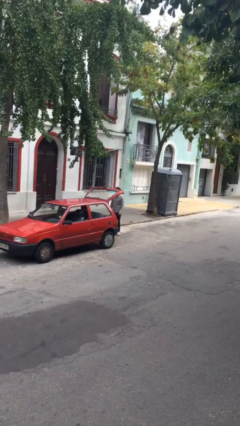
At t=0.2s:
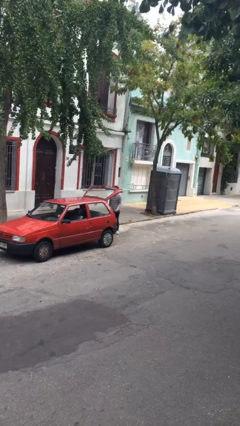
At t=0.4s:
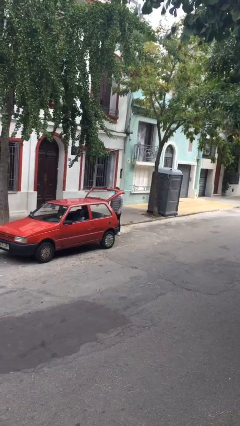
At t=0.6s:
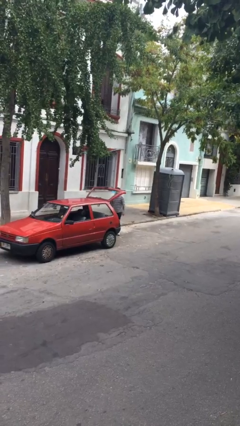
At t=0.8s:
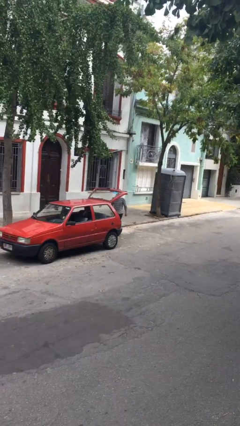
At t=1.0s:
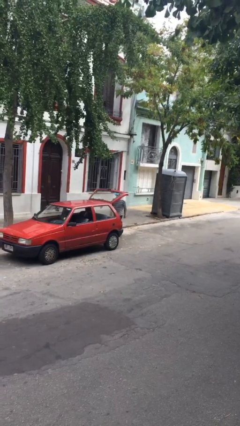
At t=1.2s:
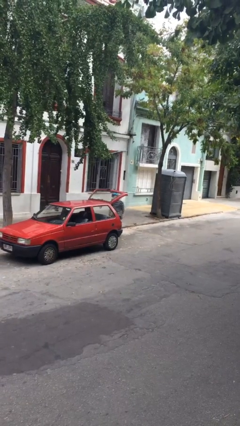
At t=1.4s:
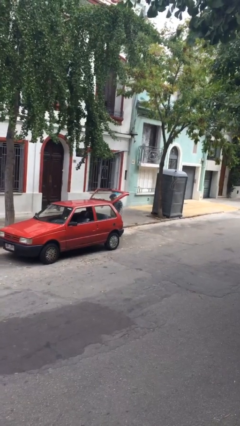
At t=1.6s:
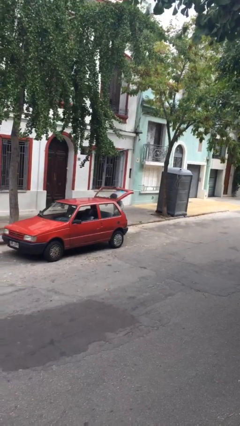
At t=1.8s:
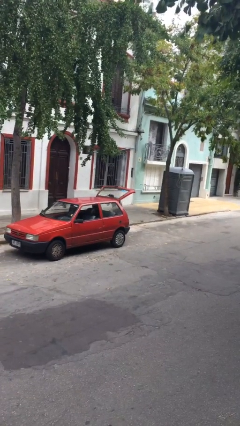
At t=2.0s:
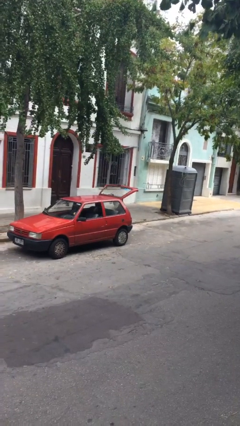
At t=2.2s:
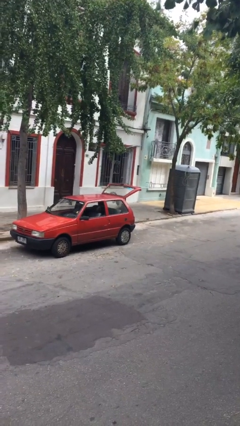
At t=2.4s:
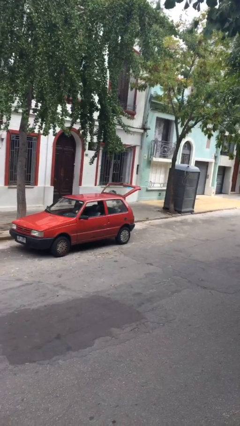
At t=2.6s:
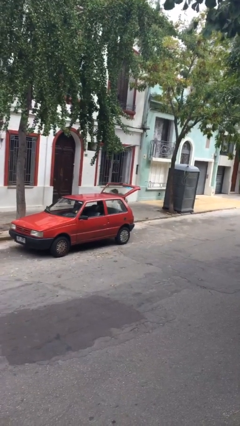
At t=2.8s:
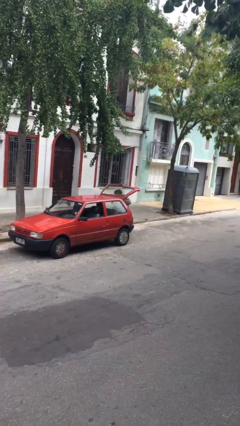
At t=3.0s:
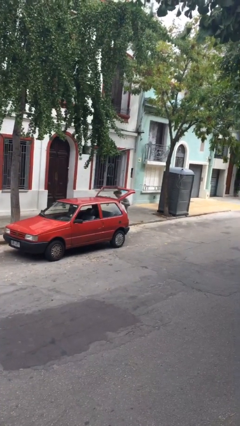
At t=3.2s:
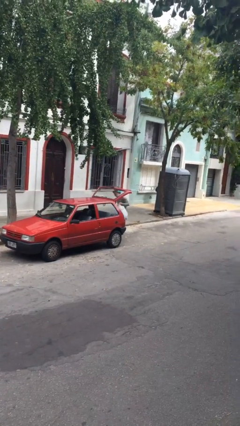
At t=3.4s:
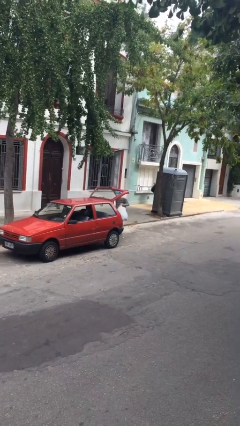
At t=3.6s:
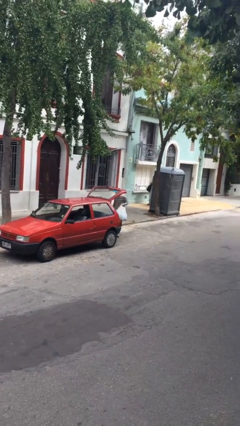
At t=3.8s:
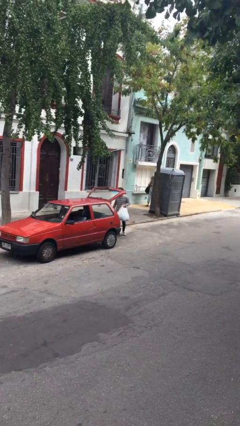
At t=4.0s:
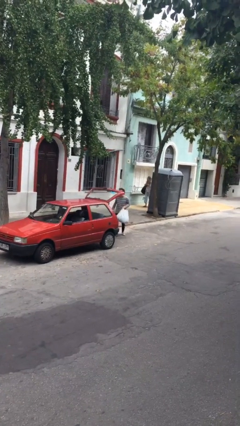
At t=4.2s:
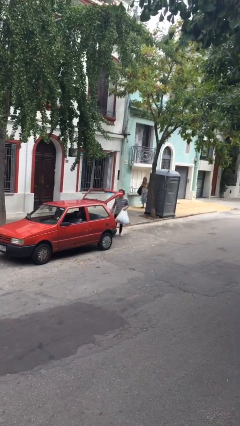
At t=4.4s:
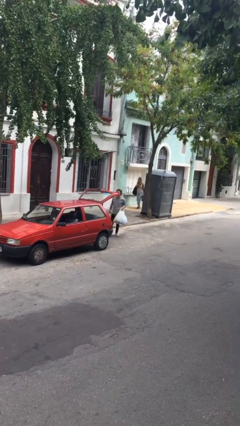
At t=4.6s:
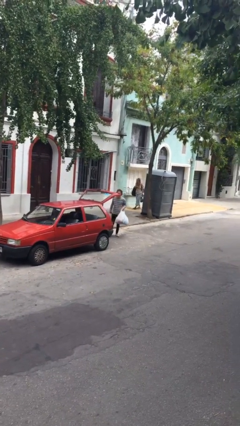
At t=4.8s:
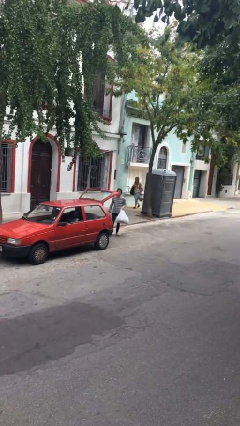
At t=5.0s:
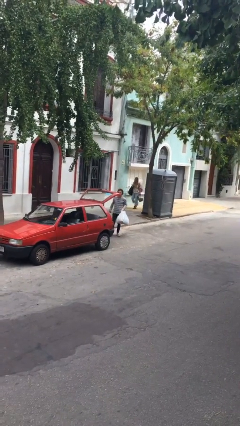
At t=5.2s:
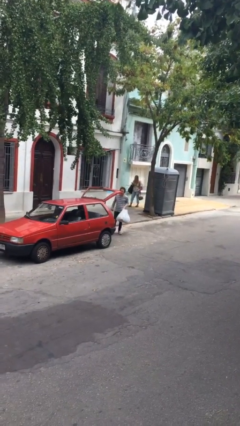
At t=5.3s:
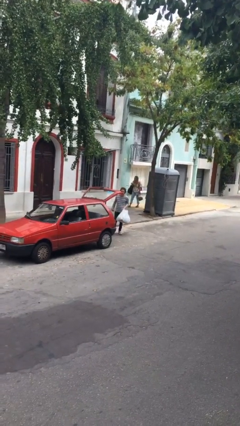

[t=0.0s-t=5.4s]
person unloads car

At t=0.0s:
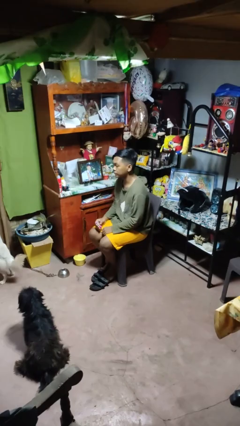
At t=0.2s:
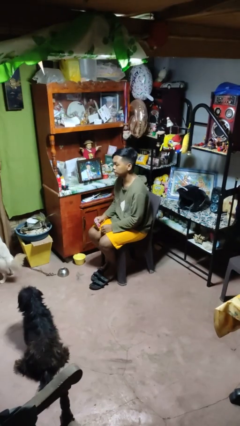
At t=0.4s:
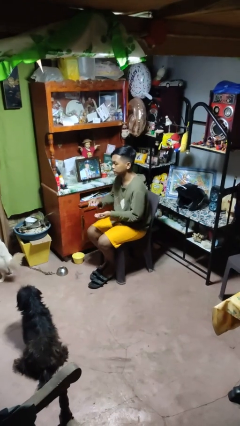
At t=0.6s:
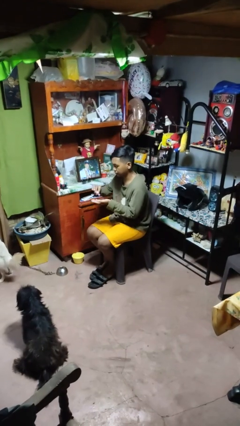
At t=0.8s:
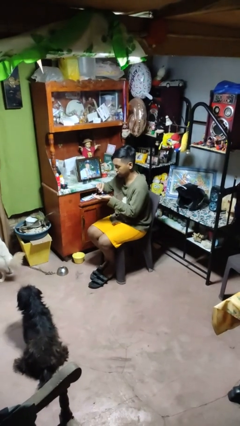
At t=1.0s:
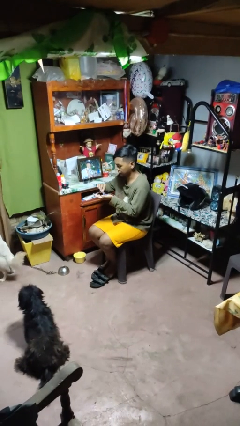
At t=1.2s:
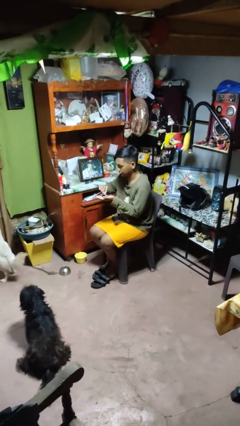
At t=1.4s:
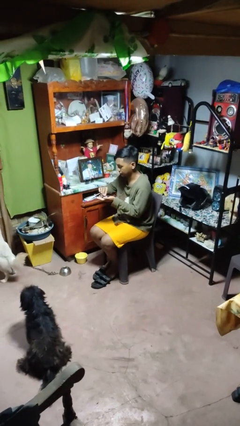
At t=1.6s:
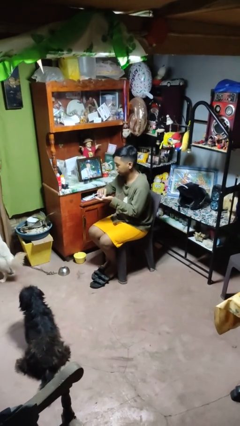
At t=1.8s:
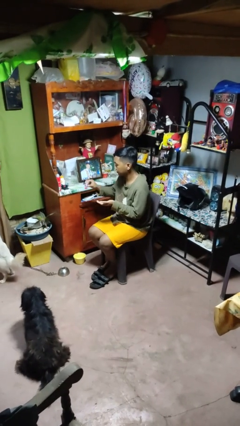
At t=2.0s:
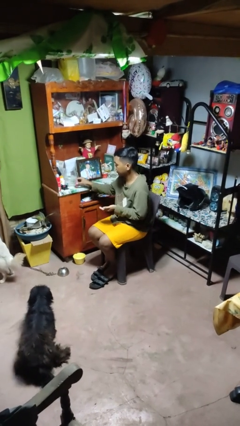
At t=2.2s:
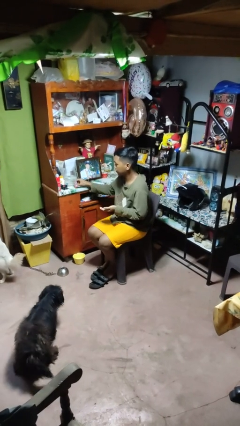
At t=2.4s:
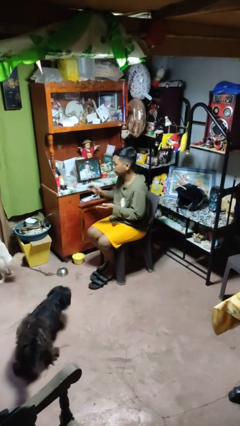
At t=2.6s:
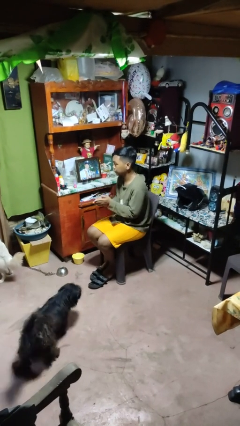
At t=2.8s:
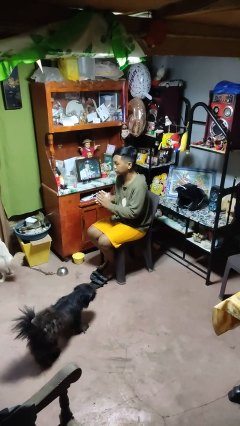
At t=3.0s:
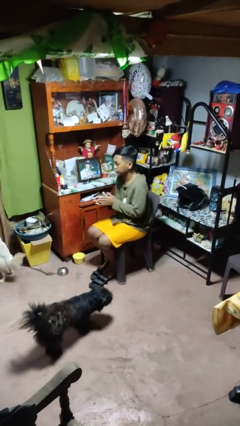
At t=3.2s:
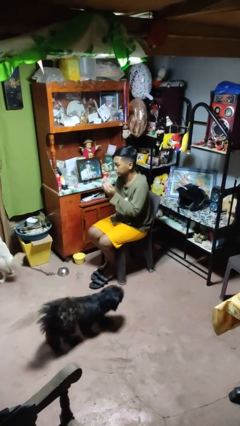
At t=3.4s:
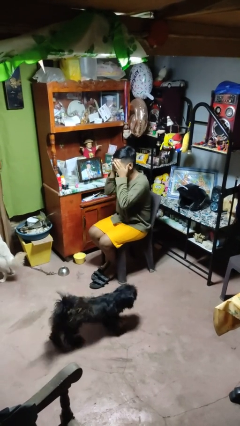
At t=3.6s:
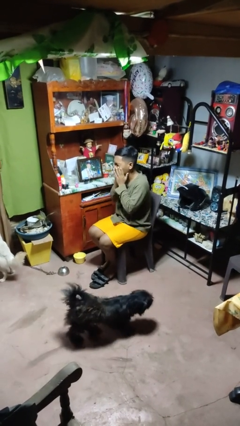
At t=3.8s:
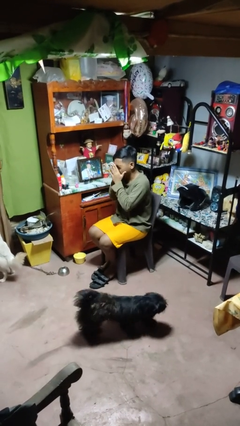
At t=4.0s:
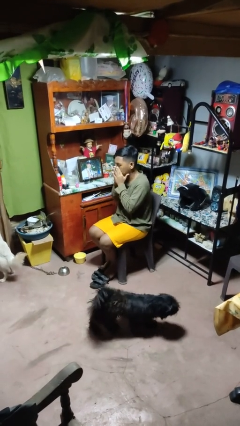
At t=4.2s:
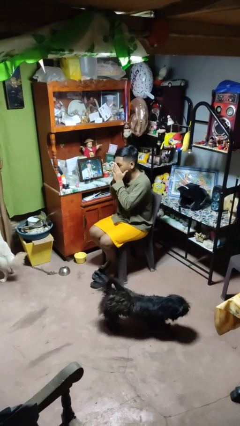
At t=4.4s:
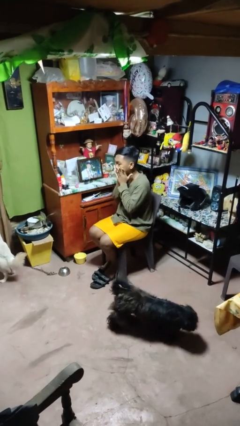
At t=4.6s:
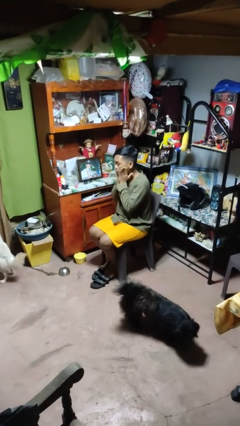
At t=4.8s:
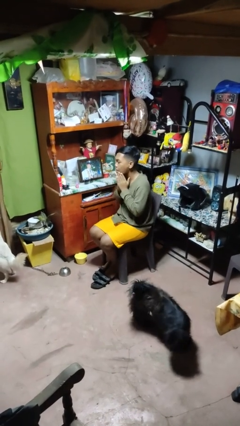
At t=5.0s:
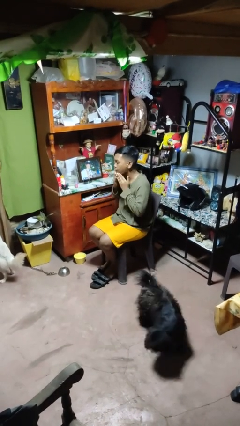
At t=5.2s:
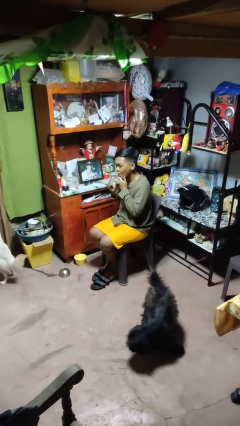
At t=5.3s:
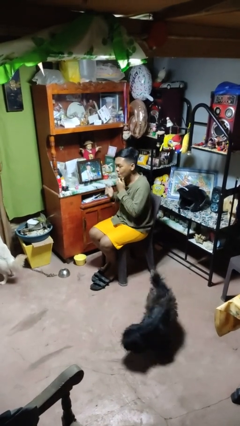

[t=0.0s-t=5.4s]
person applies facial moisturizer

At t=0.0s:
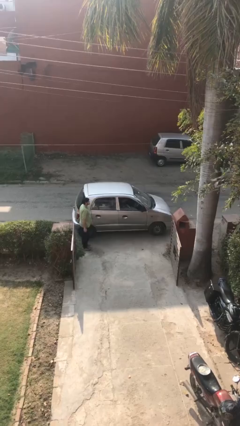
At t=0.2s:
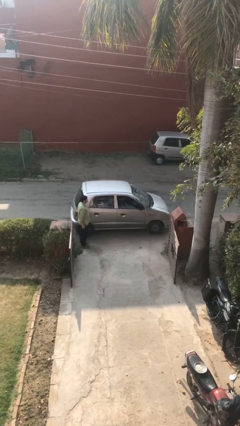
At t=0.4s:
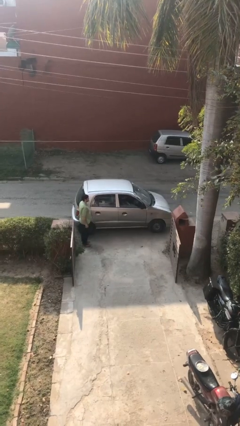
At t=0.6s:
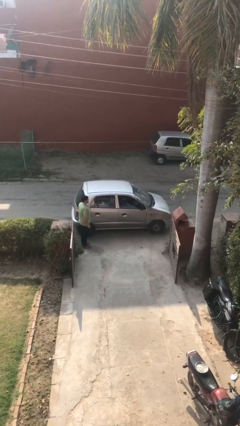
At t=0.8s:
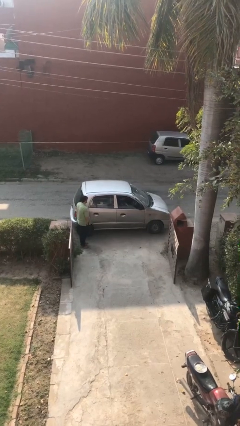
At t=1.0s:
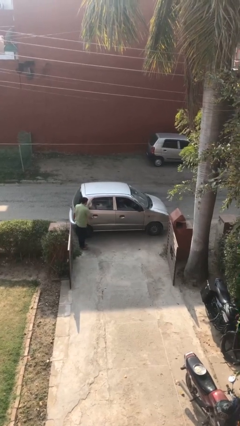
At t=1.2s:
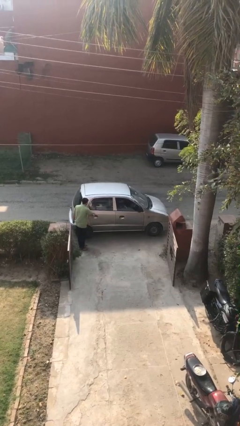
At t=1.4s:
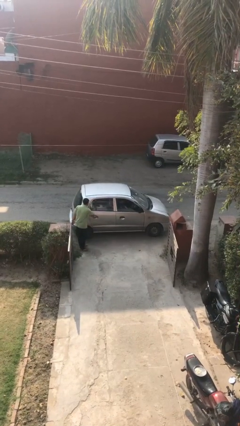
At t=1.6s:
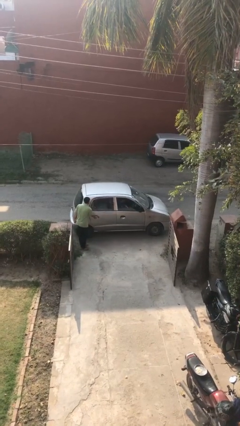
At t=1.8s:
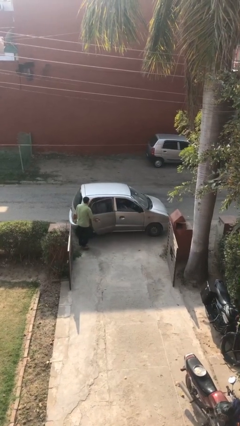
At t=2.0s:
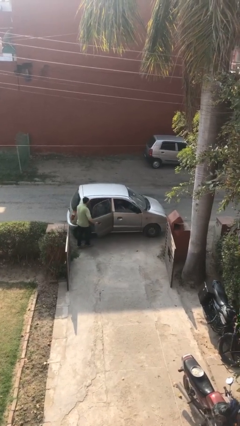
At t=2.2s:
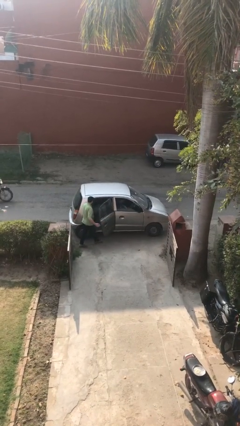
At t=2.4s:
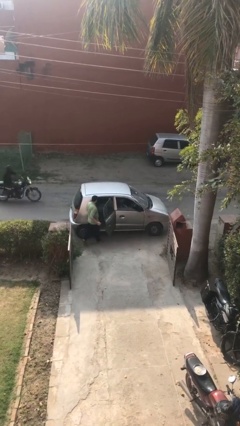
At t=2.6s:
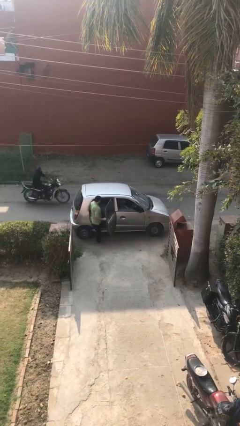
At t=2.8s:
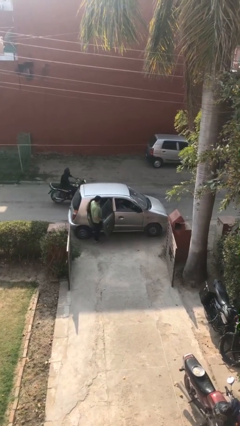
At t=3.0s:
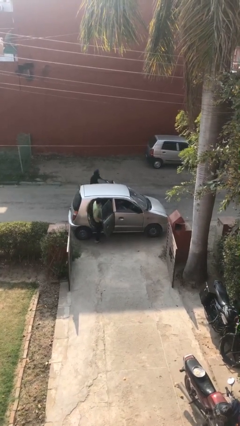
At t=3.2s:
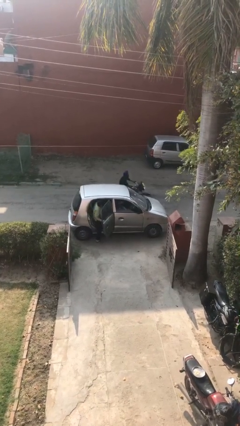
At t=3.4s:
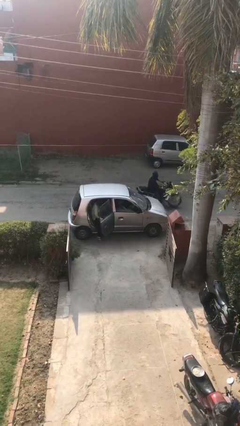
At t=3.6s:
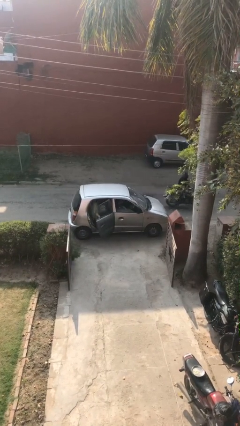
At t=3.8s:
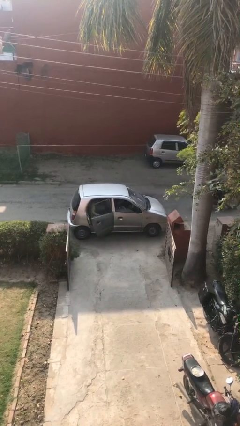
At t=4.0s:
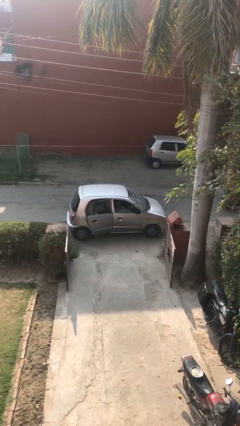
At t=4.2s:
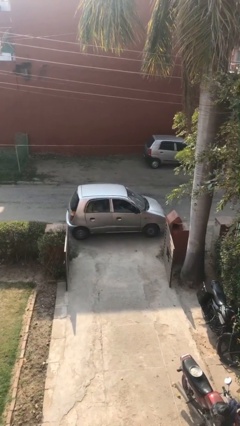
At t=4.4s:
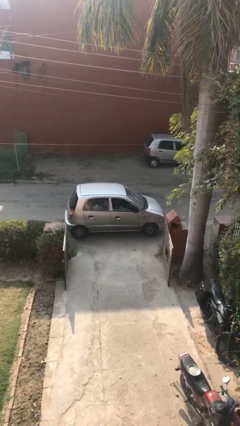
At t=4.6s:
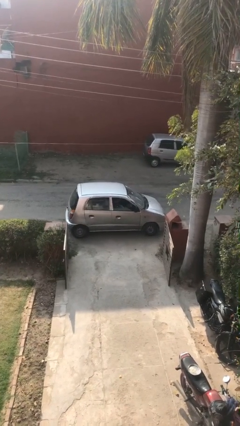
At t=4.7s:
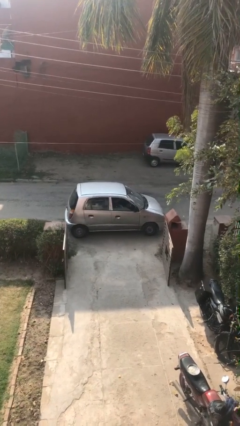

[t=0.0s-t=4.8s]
car picks up person

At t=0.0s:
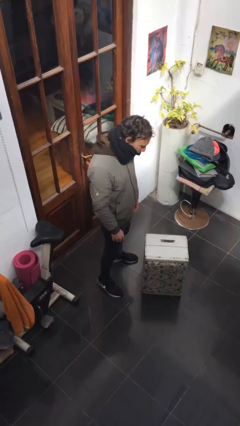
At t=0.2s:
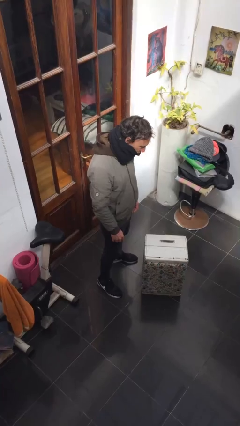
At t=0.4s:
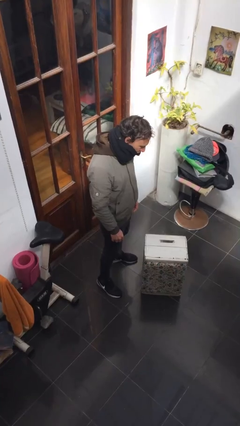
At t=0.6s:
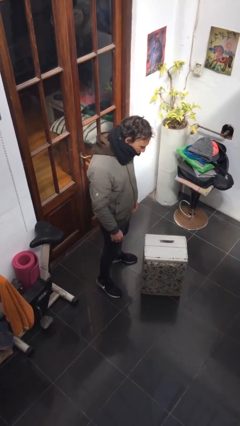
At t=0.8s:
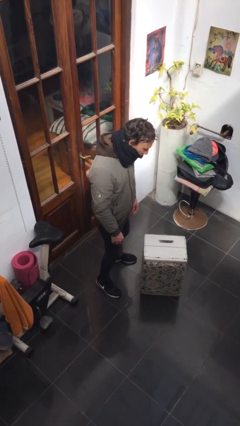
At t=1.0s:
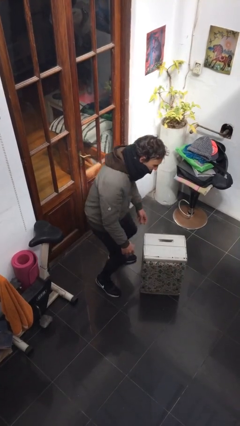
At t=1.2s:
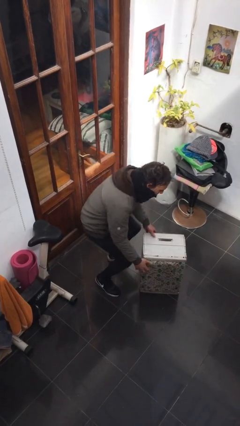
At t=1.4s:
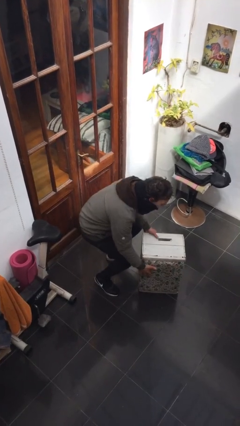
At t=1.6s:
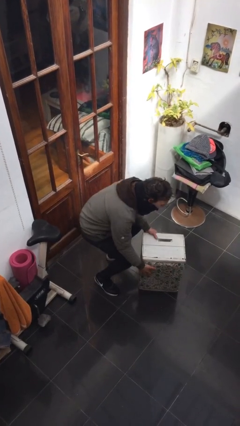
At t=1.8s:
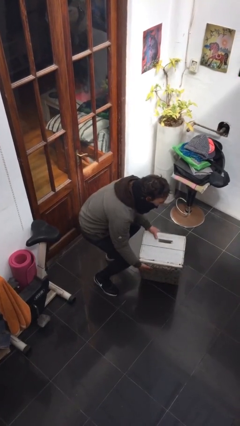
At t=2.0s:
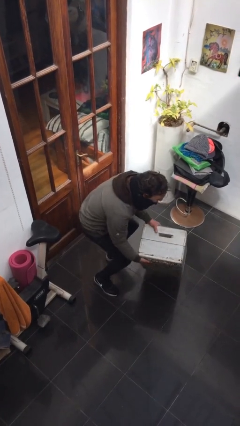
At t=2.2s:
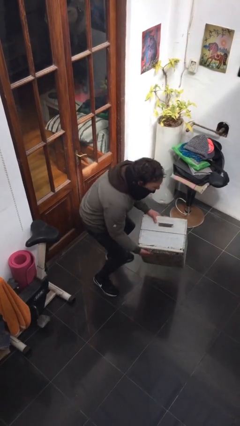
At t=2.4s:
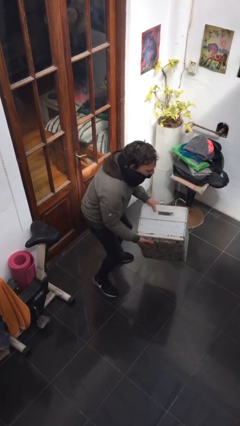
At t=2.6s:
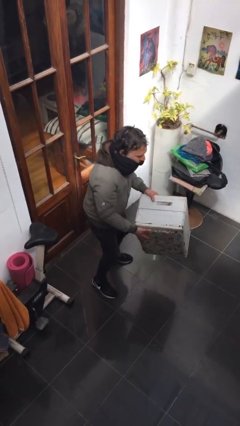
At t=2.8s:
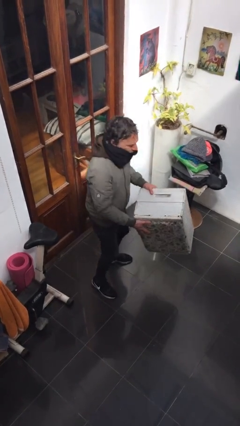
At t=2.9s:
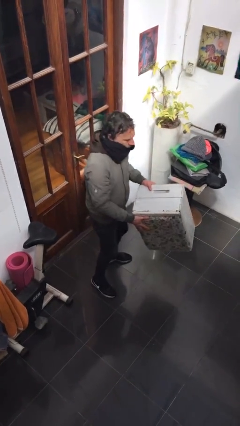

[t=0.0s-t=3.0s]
person picks up object from floor
